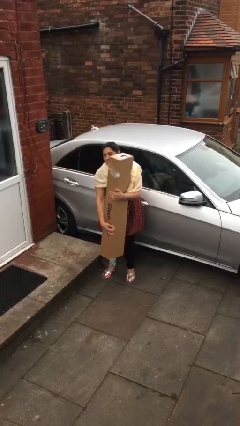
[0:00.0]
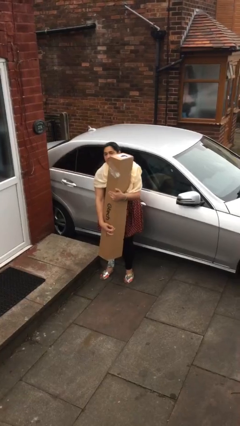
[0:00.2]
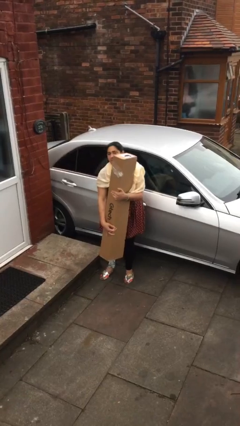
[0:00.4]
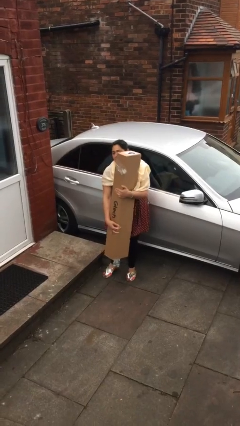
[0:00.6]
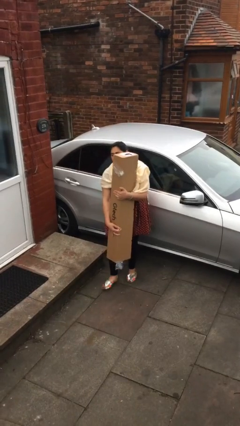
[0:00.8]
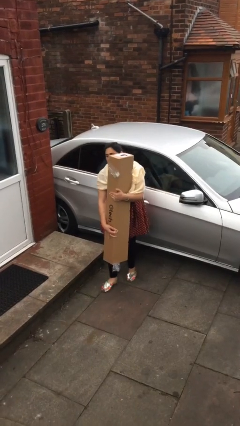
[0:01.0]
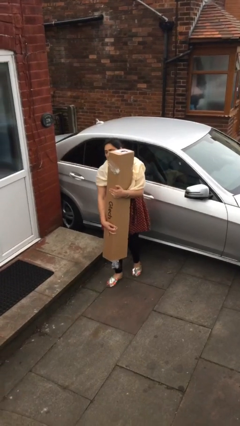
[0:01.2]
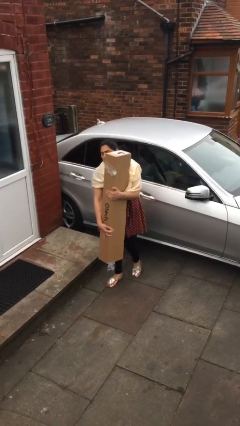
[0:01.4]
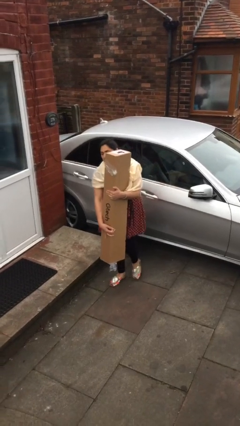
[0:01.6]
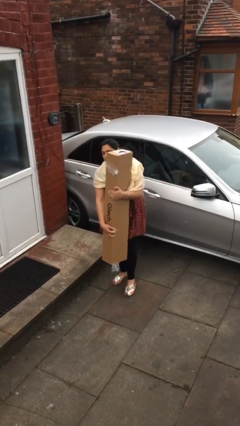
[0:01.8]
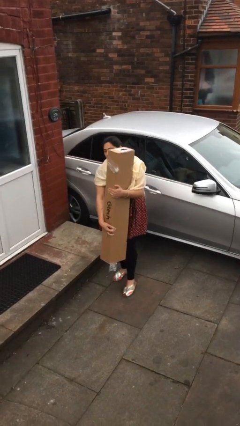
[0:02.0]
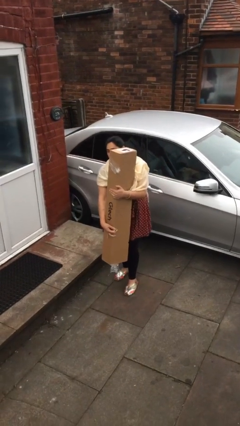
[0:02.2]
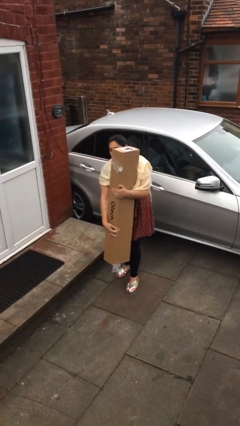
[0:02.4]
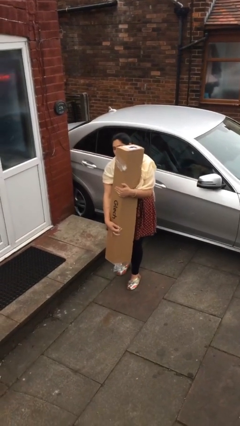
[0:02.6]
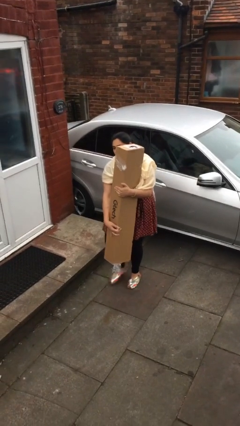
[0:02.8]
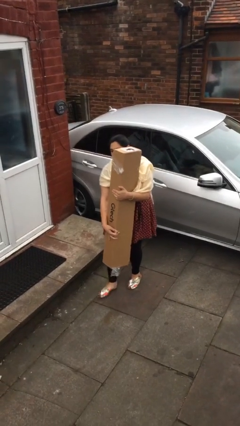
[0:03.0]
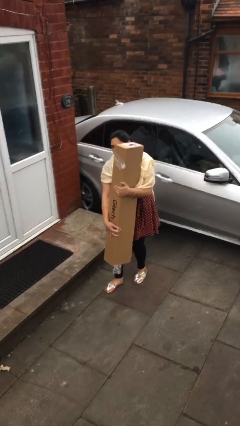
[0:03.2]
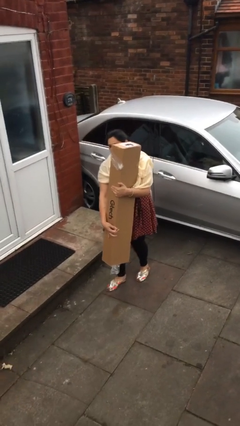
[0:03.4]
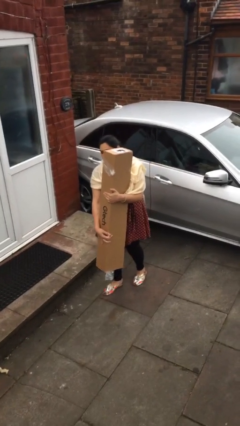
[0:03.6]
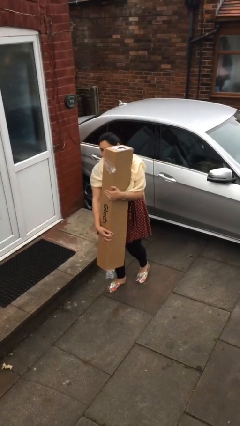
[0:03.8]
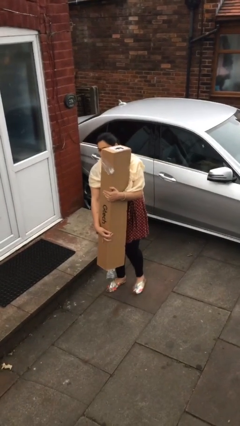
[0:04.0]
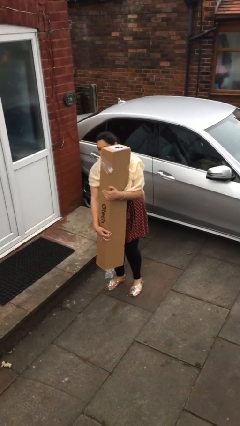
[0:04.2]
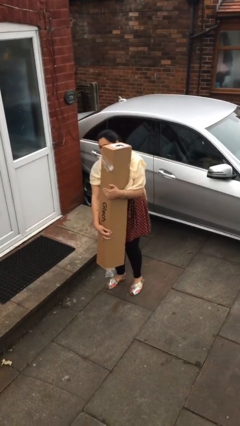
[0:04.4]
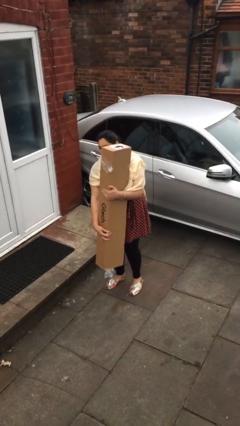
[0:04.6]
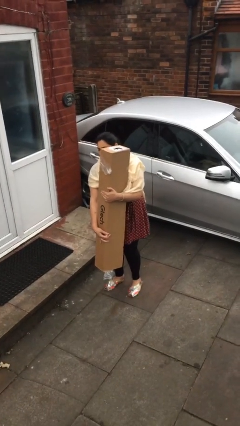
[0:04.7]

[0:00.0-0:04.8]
person carries heavy object

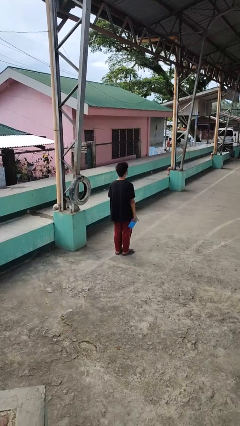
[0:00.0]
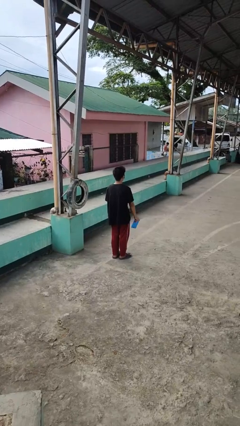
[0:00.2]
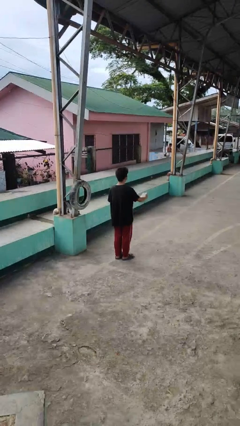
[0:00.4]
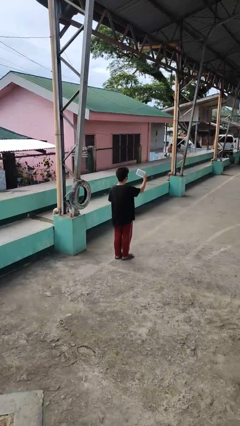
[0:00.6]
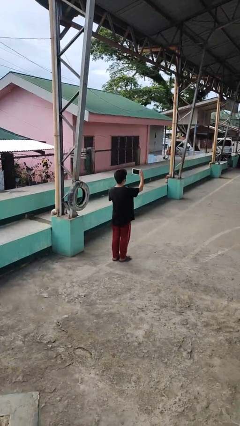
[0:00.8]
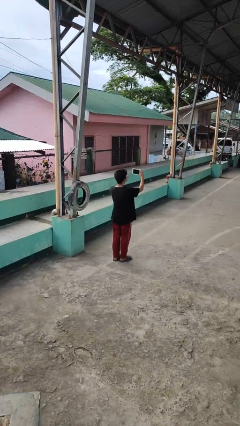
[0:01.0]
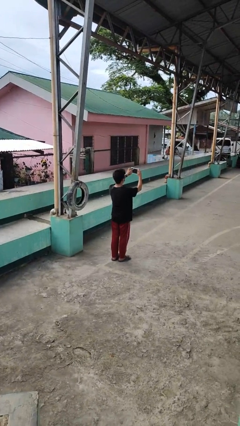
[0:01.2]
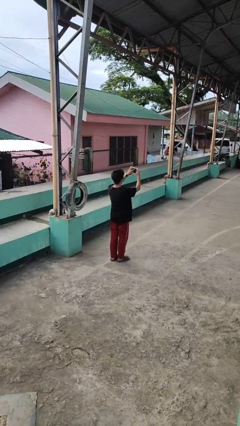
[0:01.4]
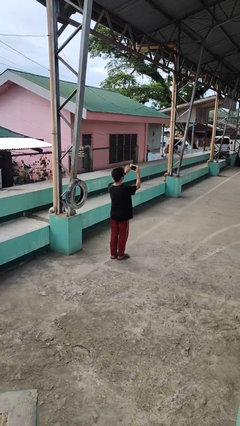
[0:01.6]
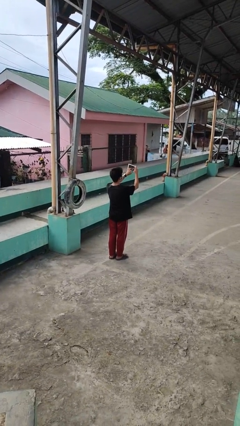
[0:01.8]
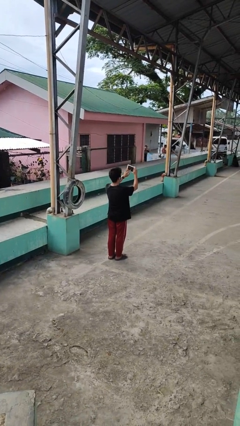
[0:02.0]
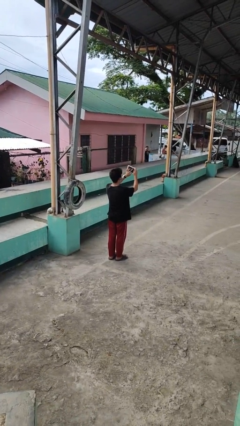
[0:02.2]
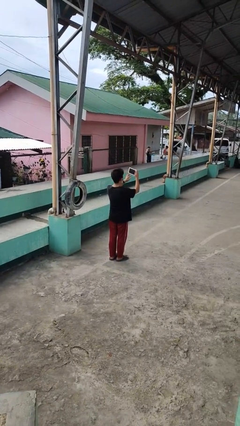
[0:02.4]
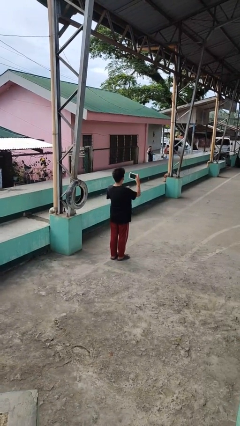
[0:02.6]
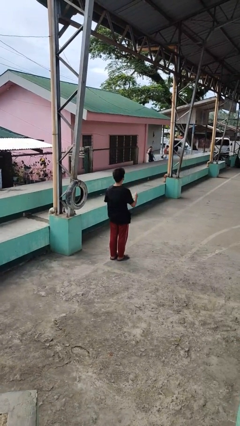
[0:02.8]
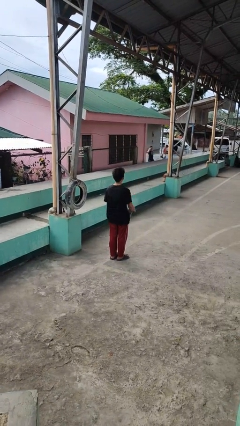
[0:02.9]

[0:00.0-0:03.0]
person interacts with tablet

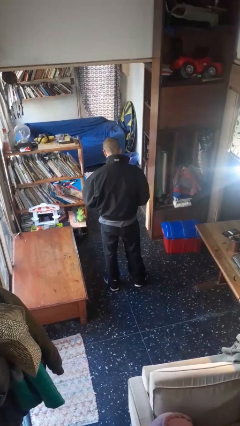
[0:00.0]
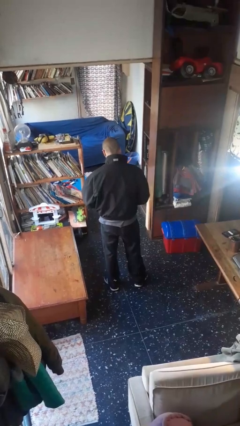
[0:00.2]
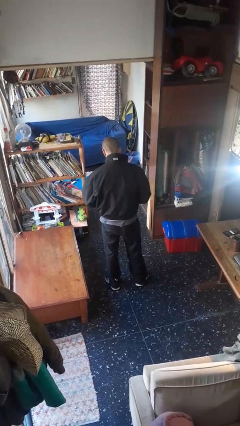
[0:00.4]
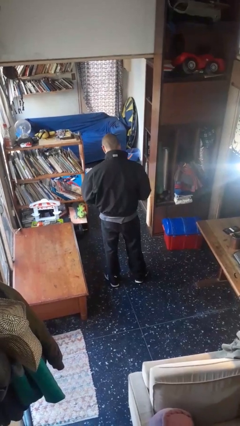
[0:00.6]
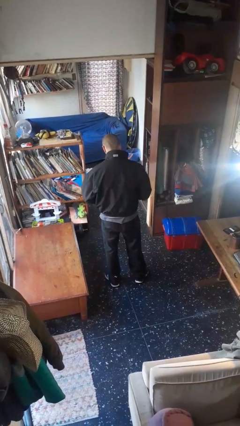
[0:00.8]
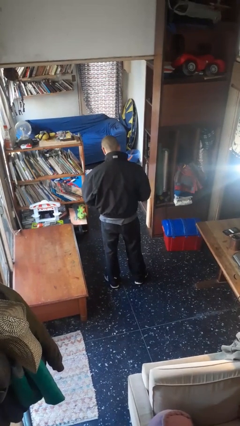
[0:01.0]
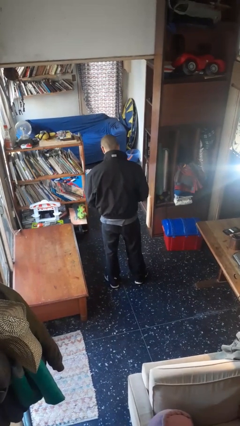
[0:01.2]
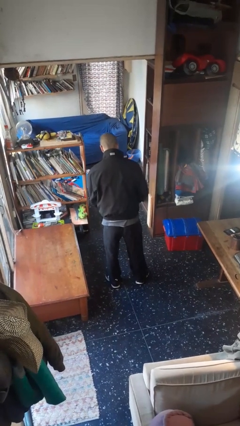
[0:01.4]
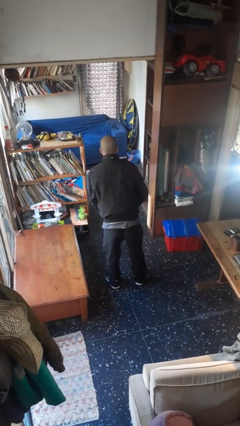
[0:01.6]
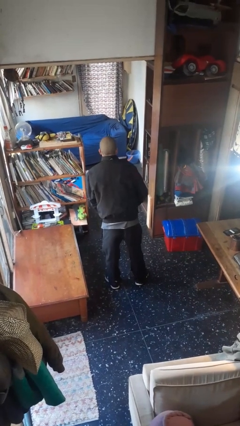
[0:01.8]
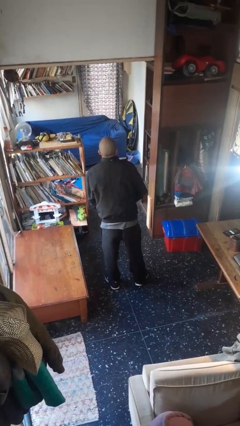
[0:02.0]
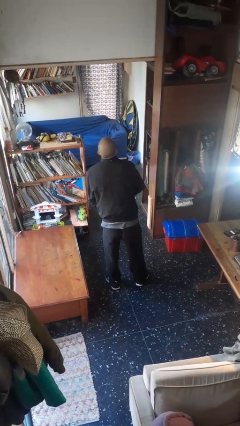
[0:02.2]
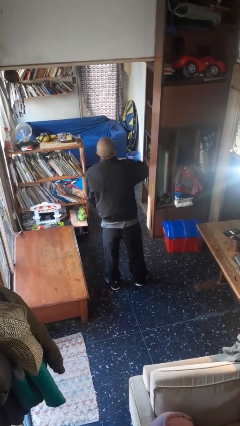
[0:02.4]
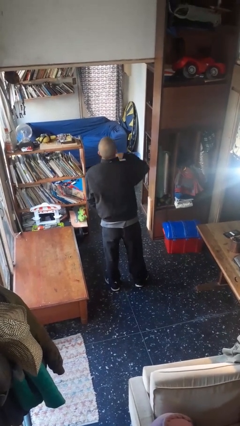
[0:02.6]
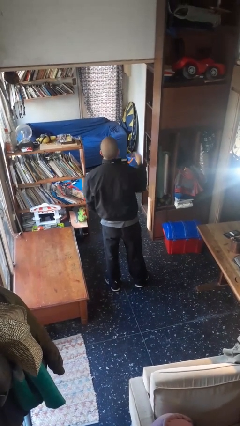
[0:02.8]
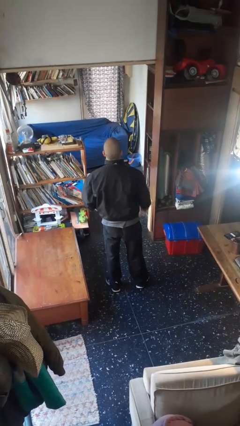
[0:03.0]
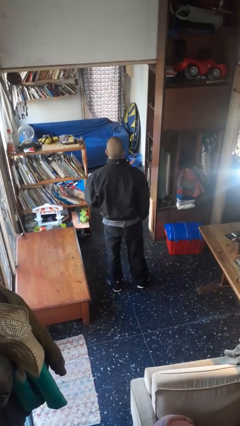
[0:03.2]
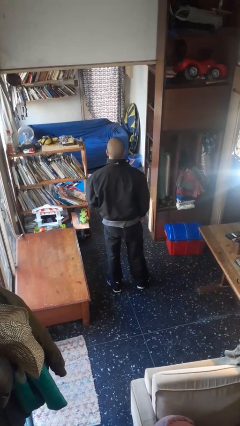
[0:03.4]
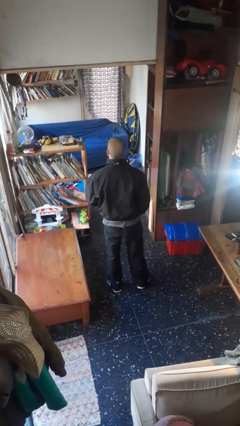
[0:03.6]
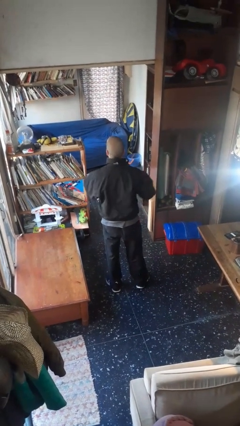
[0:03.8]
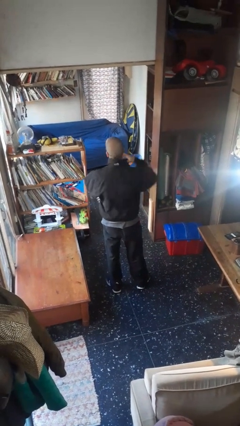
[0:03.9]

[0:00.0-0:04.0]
person zips up jacket

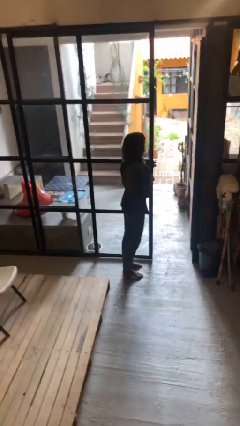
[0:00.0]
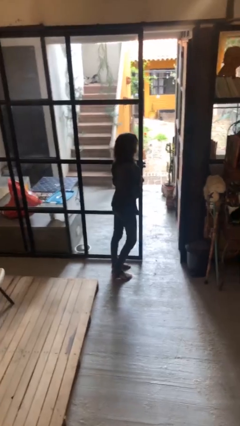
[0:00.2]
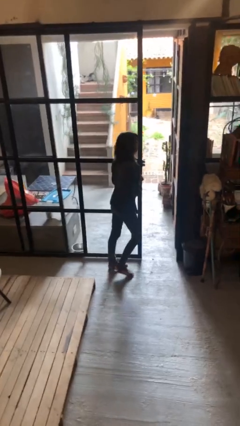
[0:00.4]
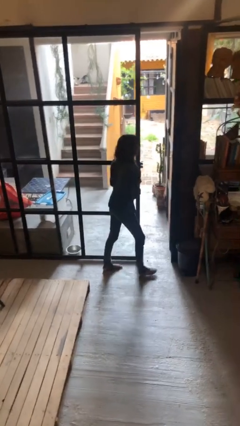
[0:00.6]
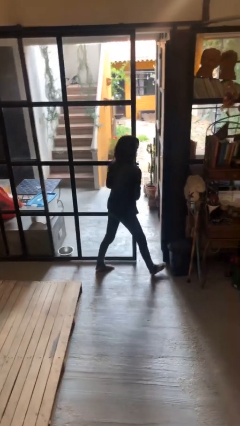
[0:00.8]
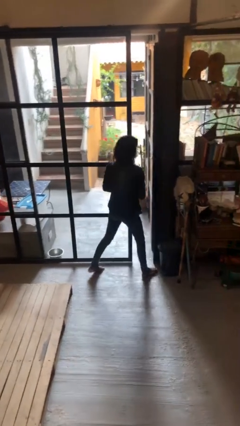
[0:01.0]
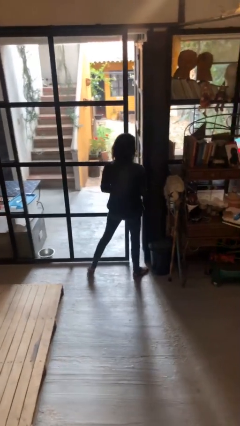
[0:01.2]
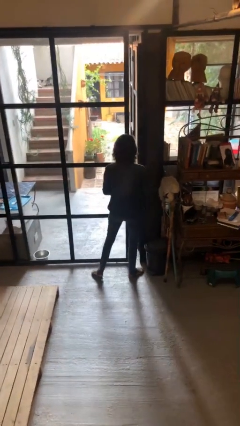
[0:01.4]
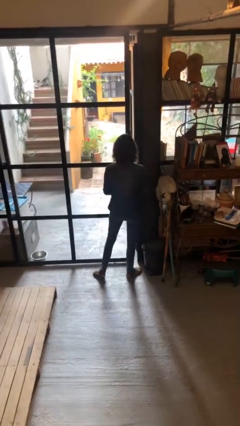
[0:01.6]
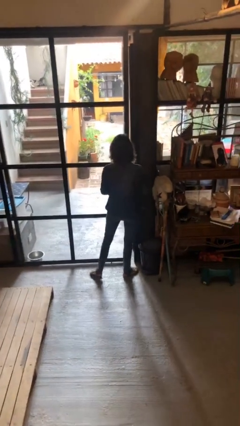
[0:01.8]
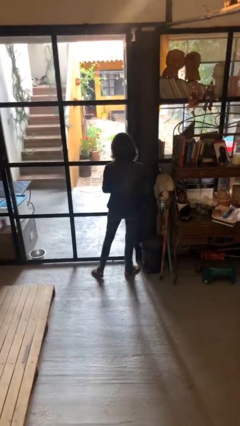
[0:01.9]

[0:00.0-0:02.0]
person closes sliding door

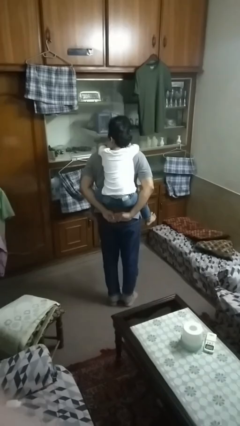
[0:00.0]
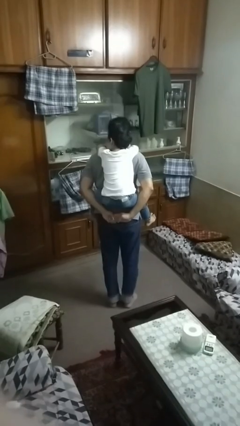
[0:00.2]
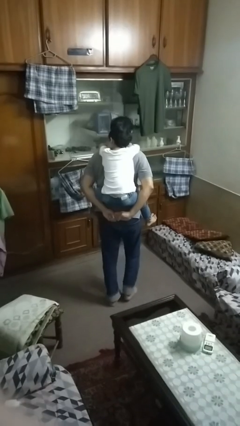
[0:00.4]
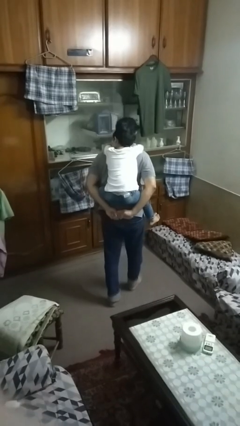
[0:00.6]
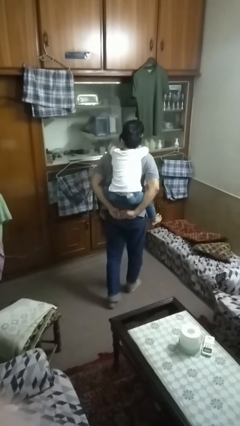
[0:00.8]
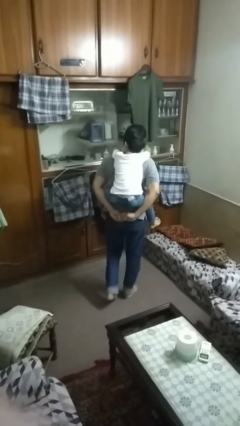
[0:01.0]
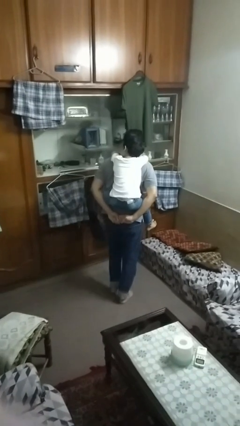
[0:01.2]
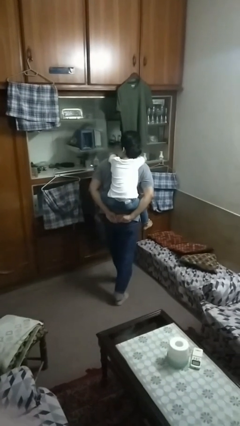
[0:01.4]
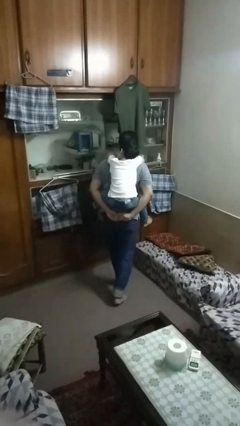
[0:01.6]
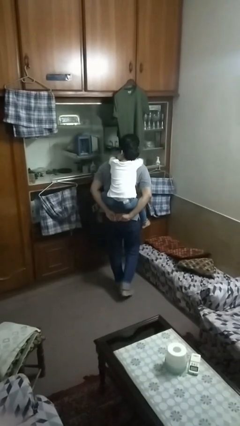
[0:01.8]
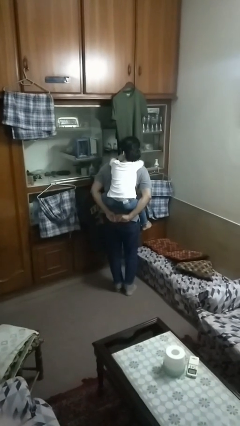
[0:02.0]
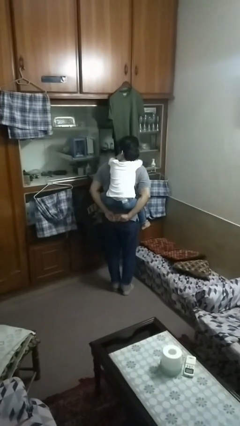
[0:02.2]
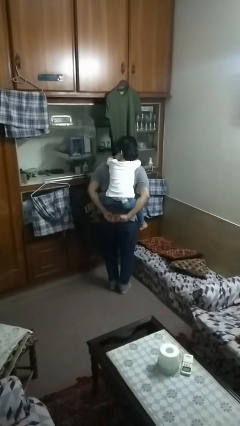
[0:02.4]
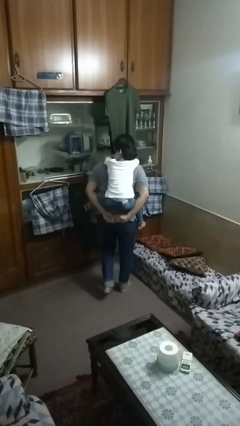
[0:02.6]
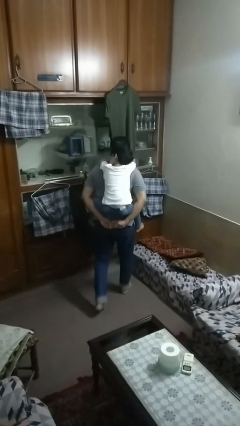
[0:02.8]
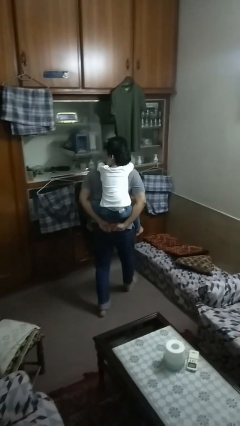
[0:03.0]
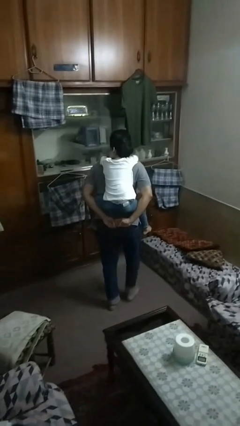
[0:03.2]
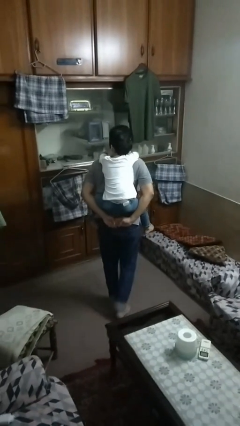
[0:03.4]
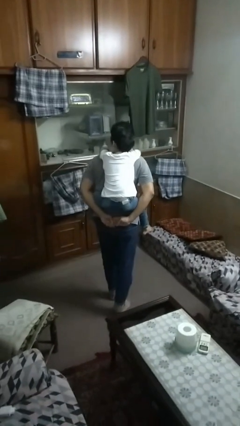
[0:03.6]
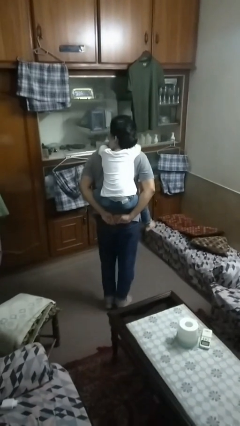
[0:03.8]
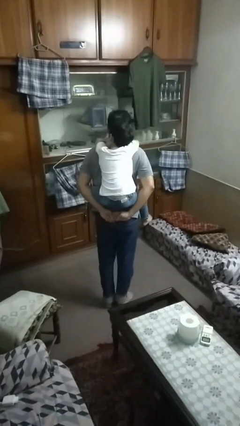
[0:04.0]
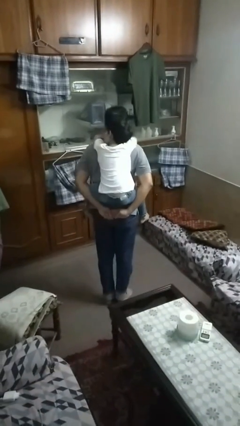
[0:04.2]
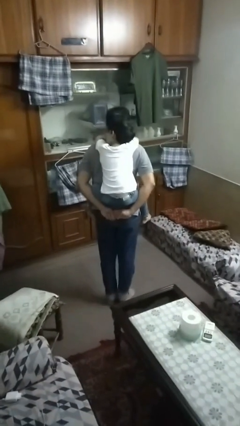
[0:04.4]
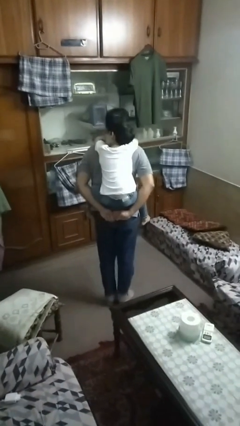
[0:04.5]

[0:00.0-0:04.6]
person carries person on back
